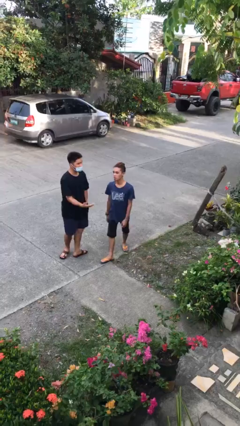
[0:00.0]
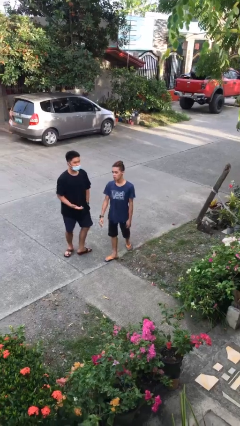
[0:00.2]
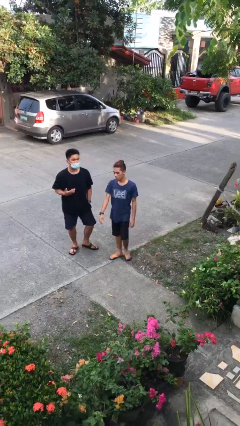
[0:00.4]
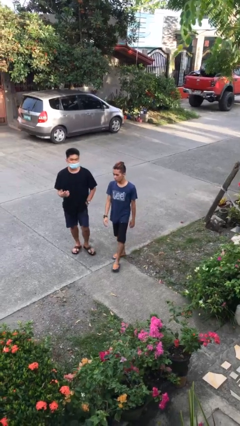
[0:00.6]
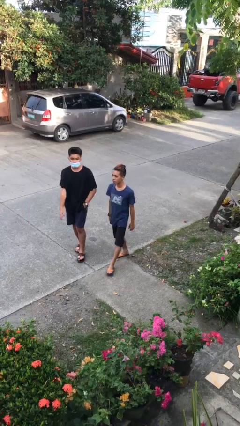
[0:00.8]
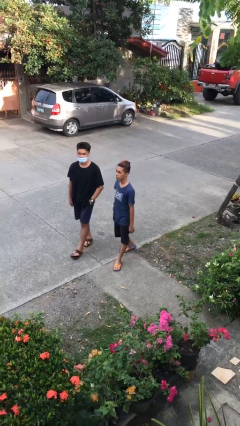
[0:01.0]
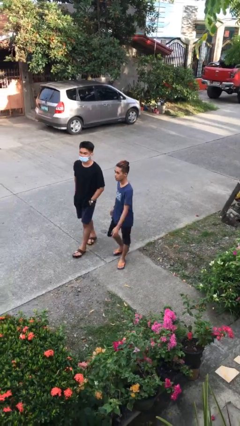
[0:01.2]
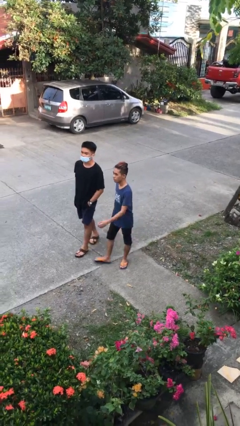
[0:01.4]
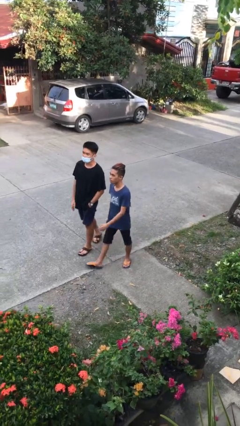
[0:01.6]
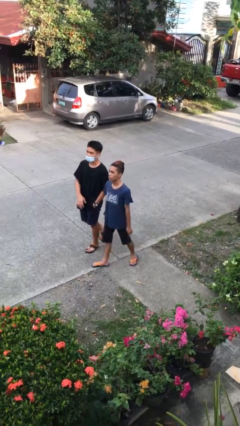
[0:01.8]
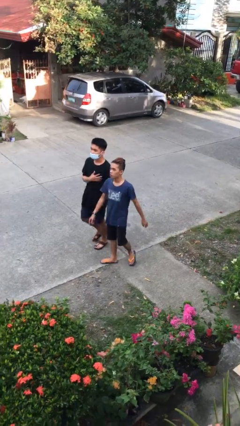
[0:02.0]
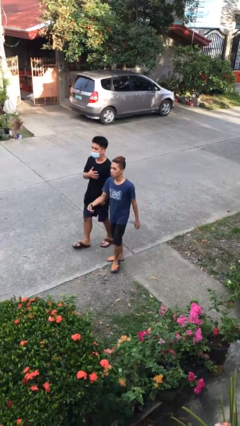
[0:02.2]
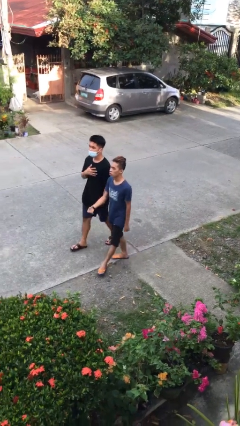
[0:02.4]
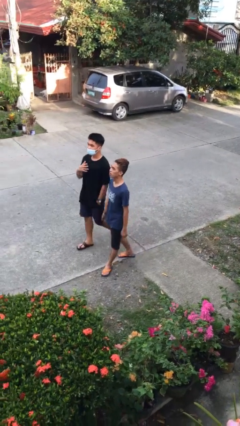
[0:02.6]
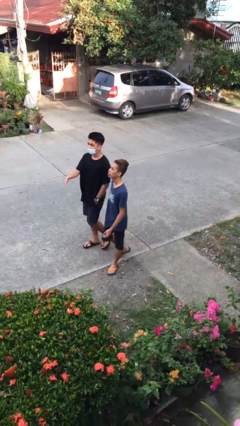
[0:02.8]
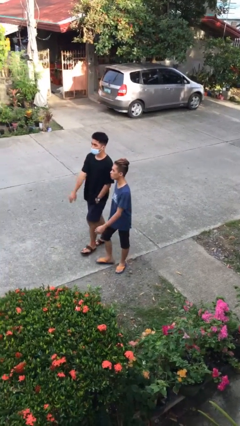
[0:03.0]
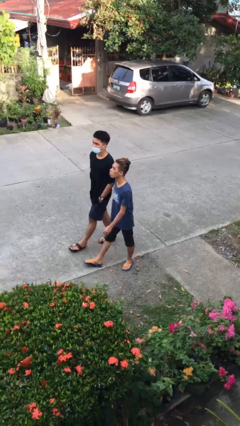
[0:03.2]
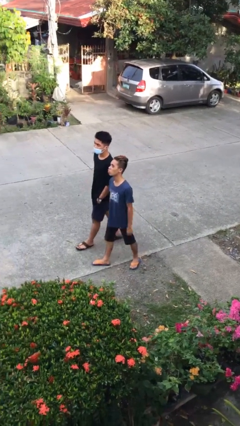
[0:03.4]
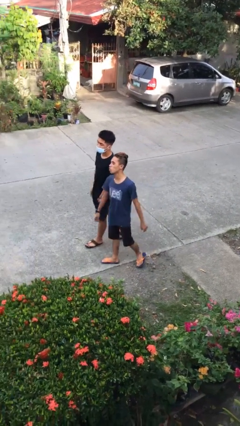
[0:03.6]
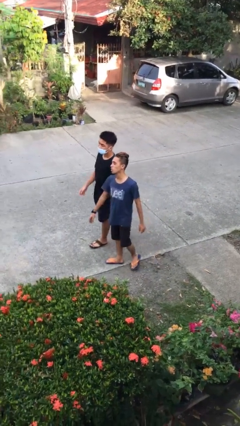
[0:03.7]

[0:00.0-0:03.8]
person talks to person

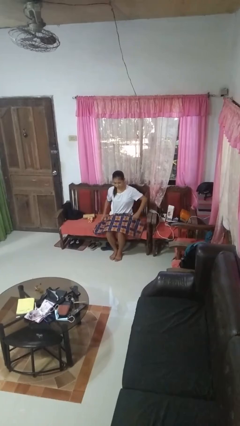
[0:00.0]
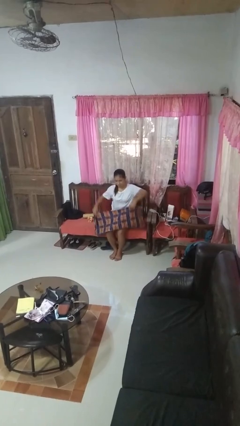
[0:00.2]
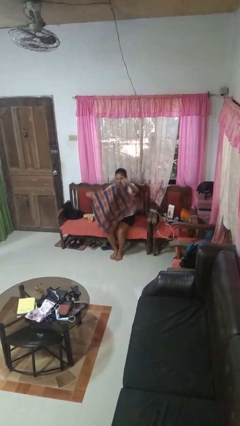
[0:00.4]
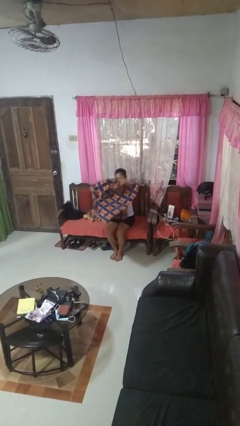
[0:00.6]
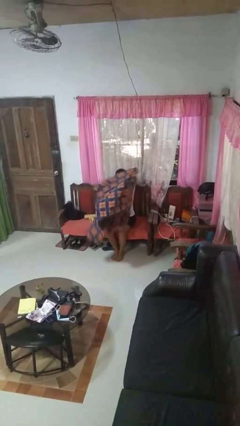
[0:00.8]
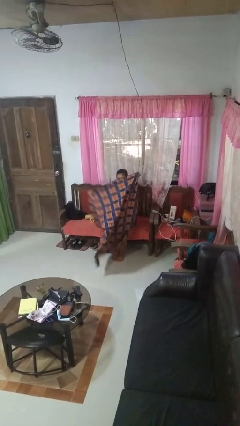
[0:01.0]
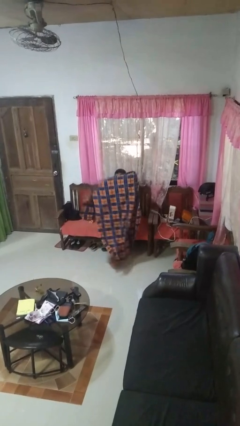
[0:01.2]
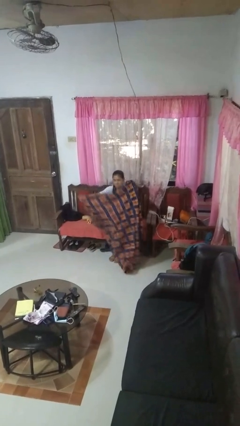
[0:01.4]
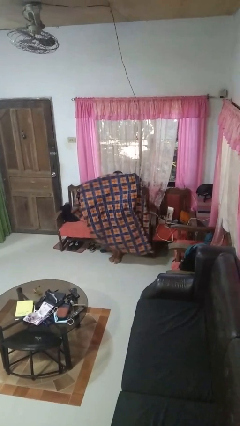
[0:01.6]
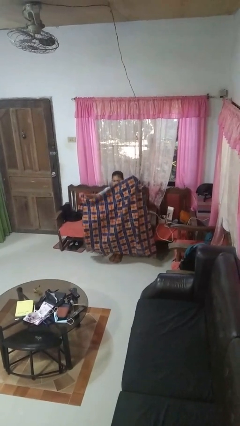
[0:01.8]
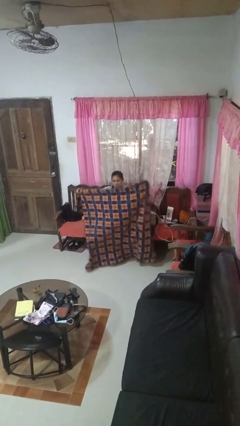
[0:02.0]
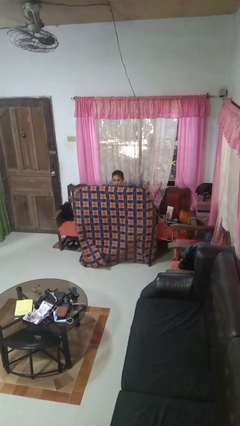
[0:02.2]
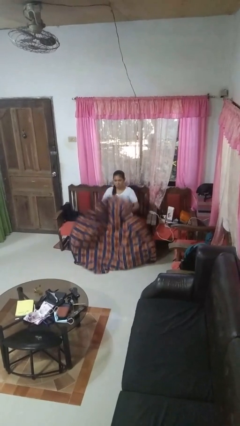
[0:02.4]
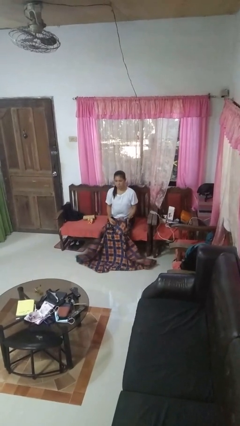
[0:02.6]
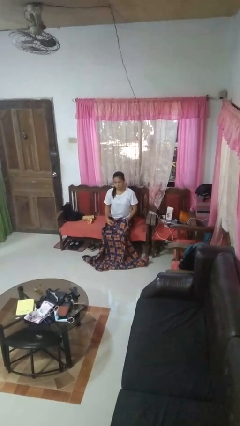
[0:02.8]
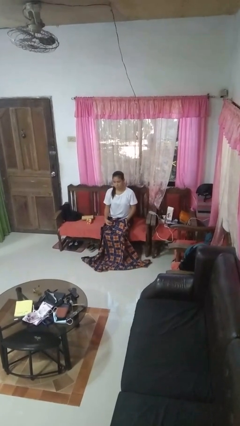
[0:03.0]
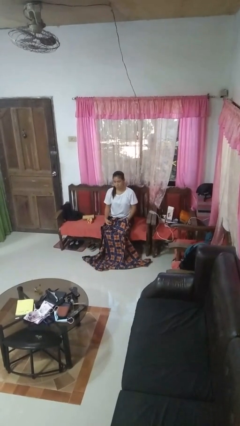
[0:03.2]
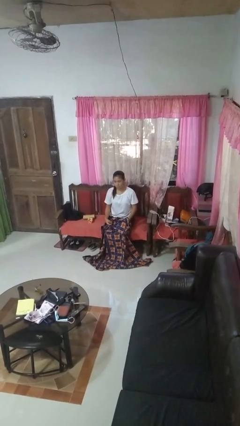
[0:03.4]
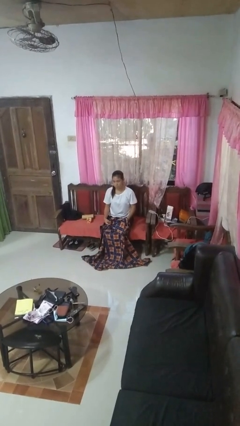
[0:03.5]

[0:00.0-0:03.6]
person unfolds blanket

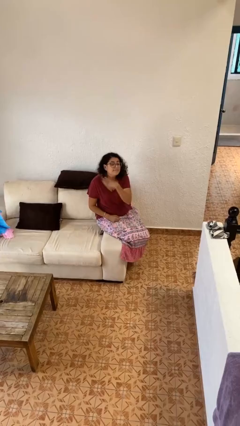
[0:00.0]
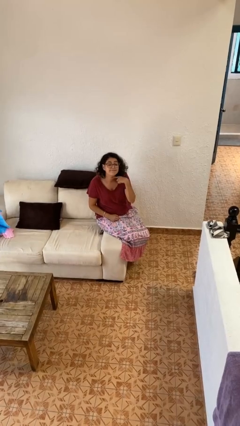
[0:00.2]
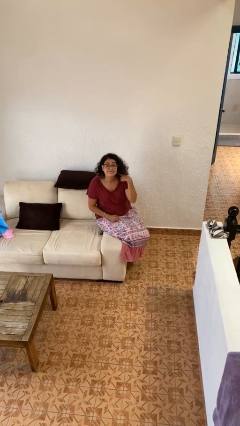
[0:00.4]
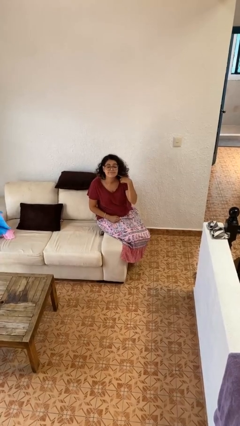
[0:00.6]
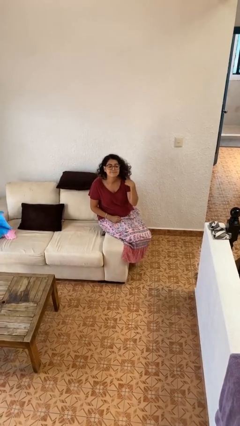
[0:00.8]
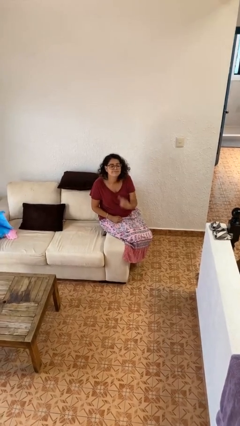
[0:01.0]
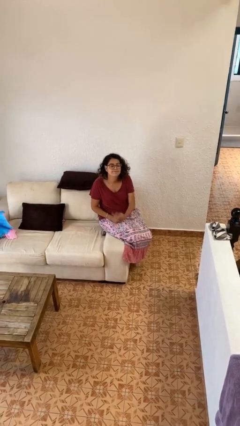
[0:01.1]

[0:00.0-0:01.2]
person gestures cut

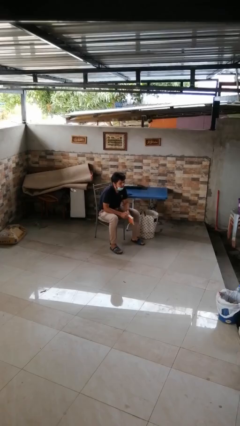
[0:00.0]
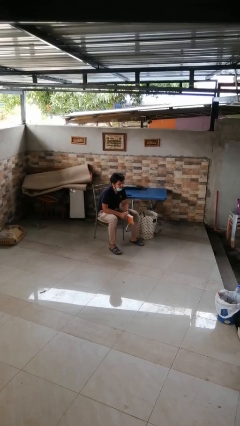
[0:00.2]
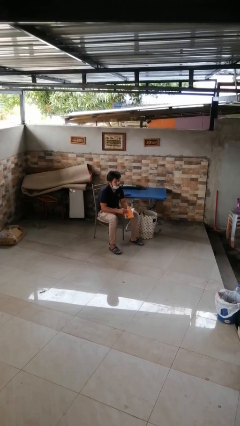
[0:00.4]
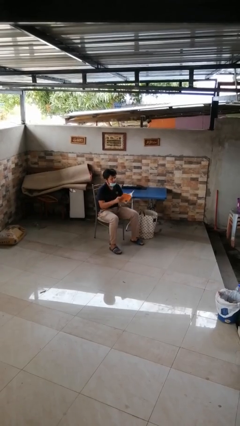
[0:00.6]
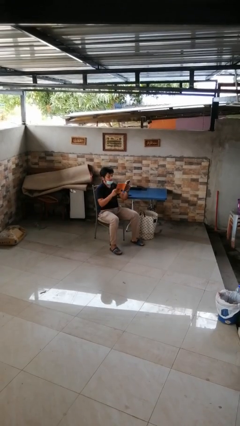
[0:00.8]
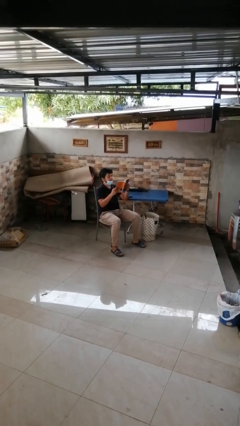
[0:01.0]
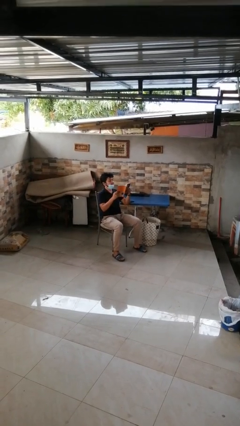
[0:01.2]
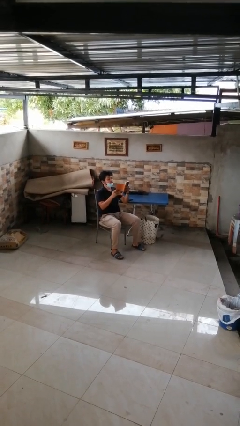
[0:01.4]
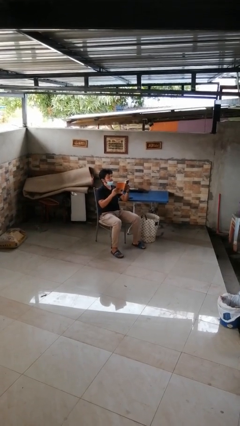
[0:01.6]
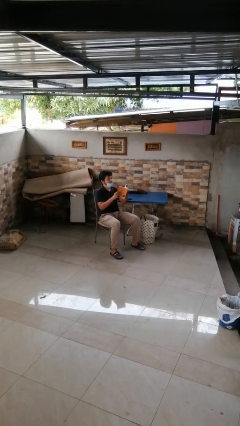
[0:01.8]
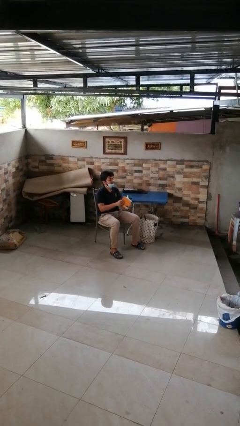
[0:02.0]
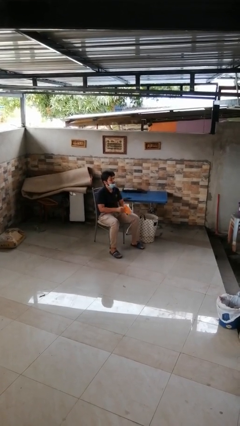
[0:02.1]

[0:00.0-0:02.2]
person reads book

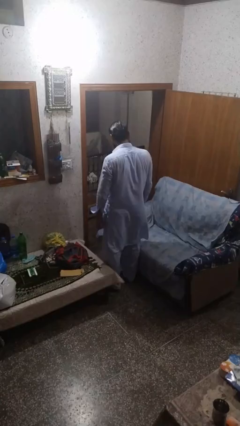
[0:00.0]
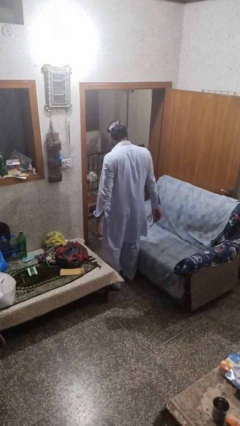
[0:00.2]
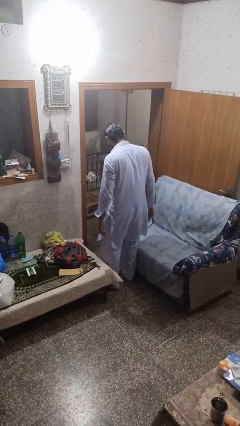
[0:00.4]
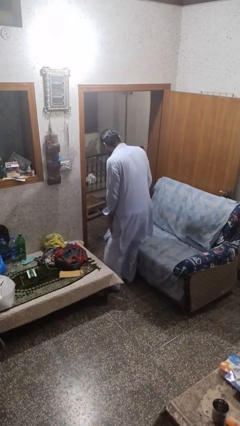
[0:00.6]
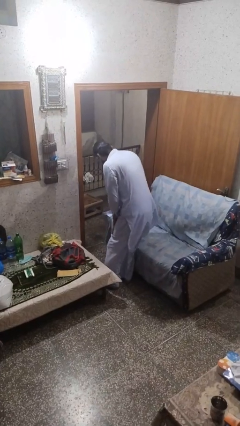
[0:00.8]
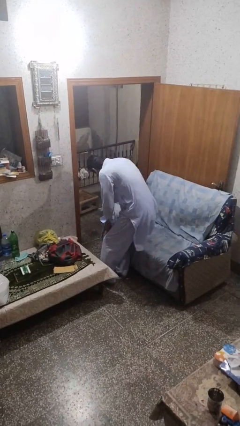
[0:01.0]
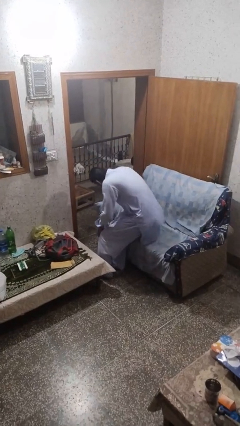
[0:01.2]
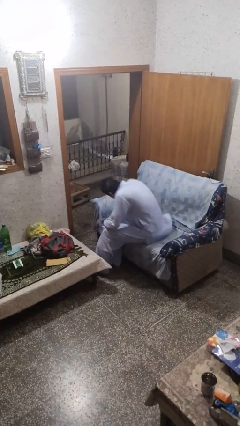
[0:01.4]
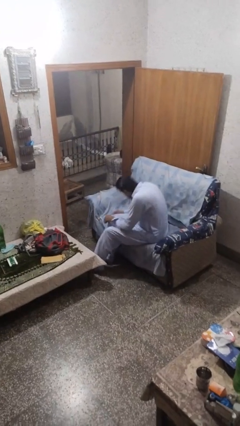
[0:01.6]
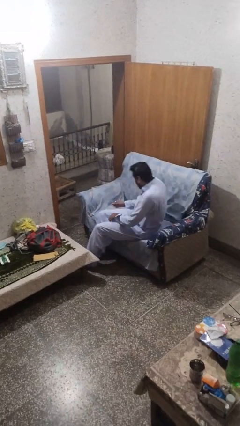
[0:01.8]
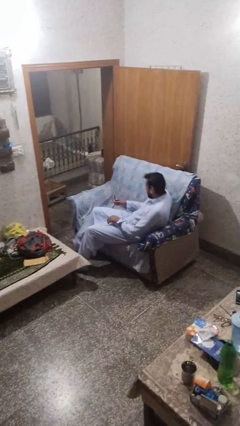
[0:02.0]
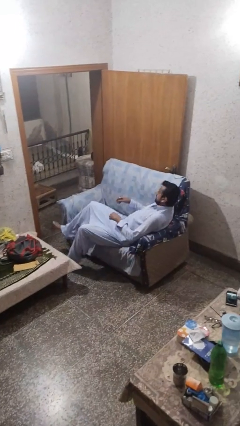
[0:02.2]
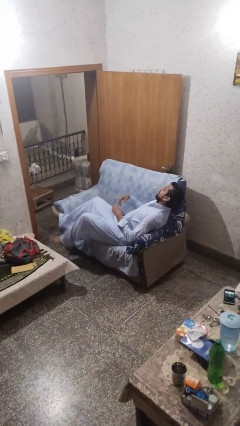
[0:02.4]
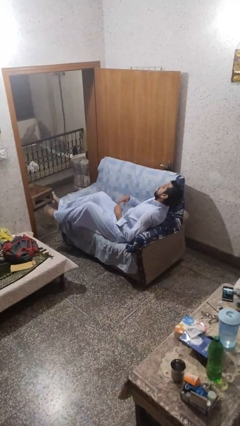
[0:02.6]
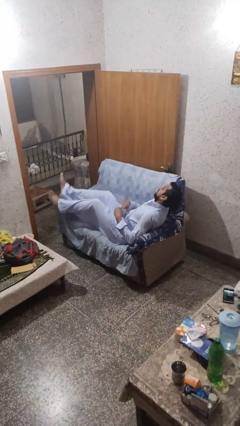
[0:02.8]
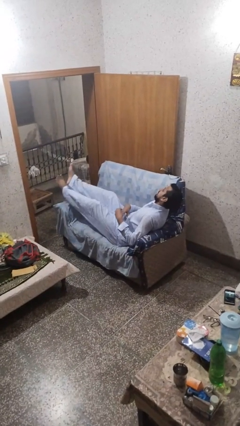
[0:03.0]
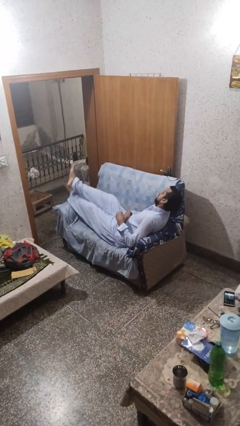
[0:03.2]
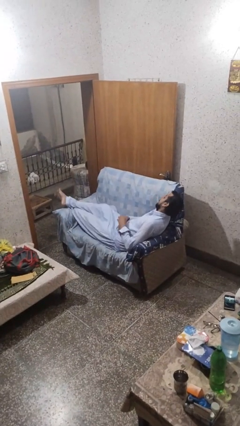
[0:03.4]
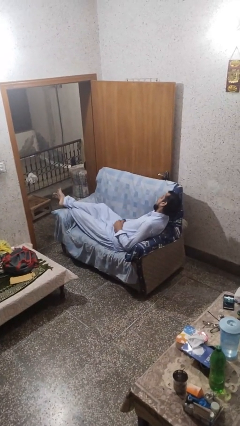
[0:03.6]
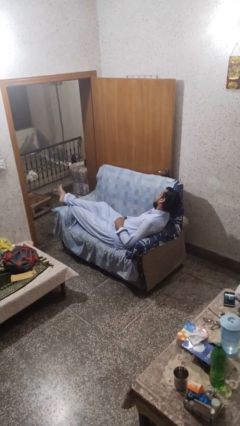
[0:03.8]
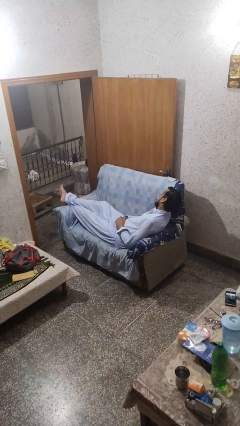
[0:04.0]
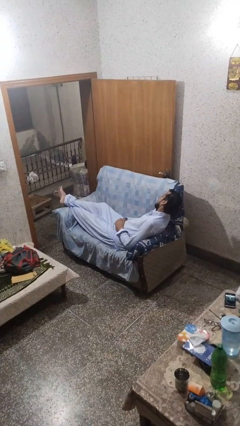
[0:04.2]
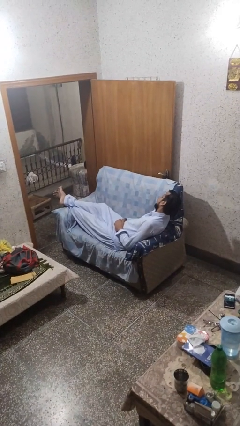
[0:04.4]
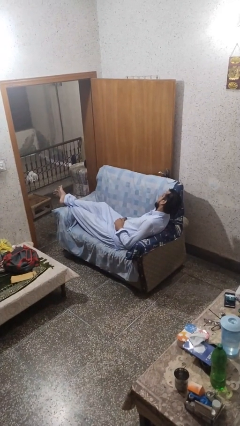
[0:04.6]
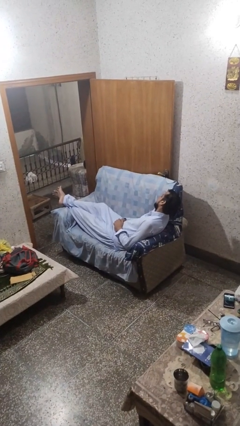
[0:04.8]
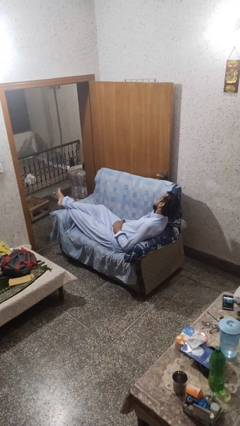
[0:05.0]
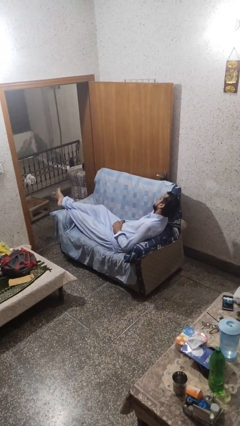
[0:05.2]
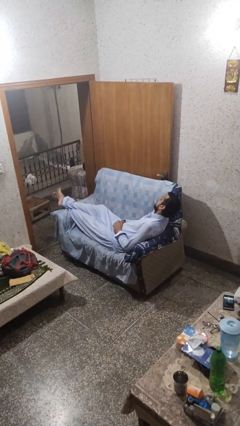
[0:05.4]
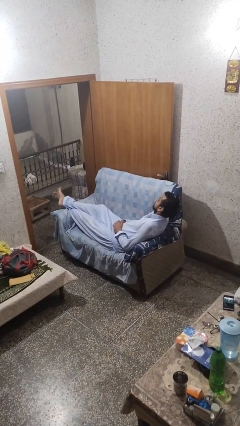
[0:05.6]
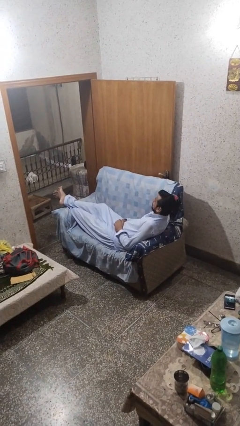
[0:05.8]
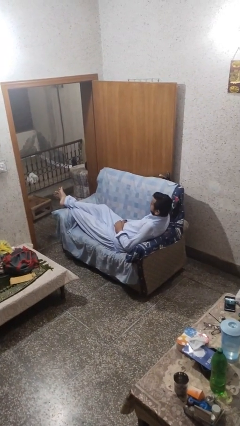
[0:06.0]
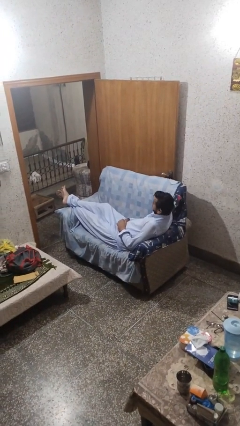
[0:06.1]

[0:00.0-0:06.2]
person lies down on couch

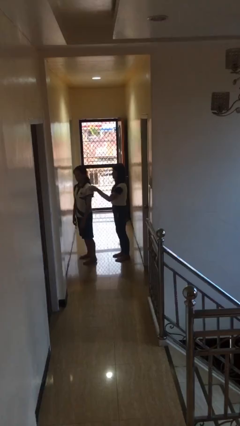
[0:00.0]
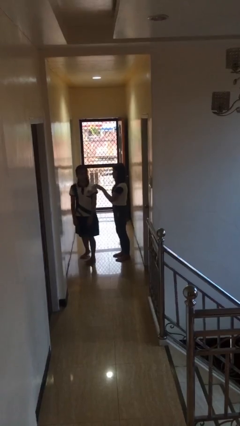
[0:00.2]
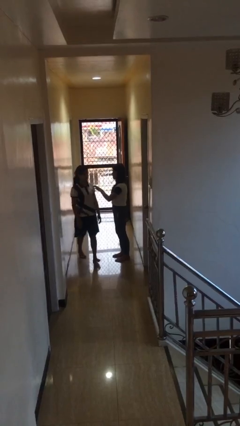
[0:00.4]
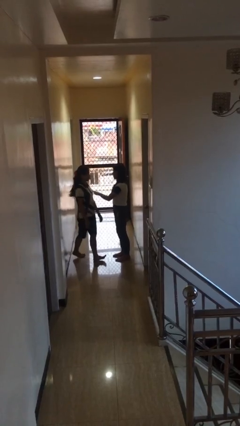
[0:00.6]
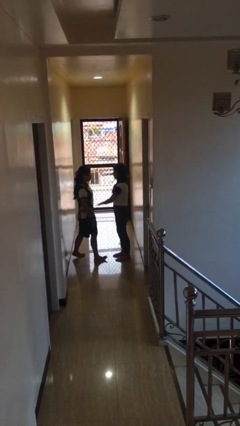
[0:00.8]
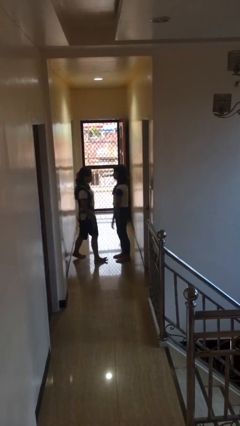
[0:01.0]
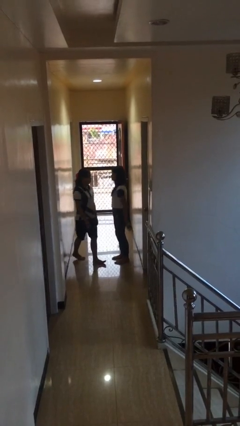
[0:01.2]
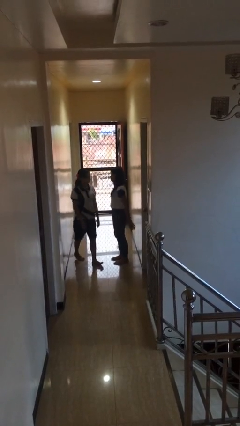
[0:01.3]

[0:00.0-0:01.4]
person spins person around
